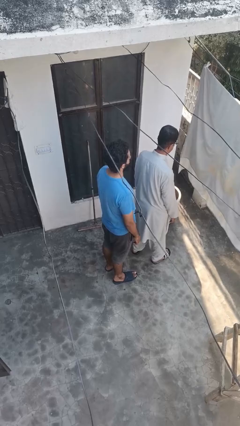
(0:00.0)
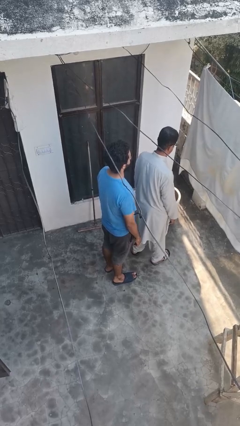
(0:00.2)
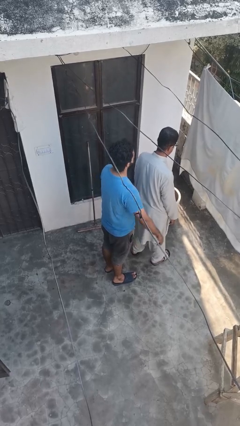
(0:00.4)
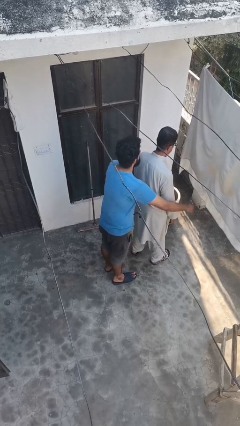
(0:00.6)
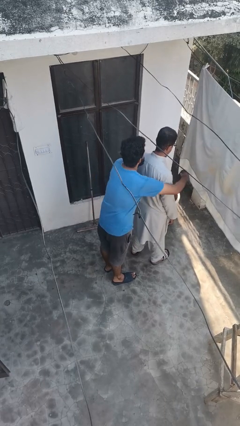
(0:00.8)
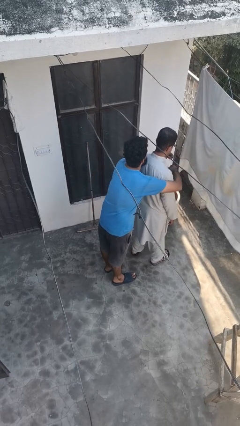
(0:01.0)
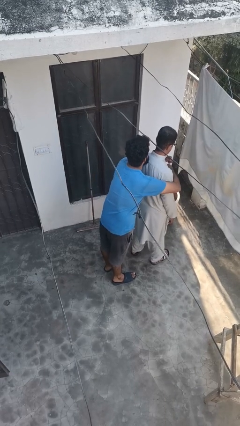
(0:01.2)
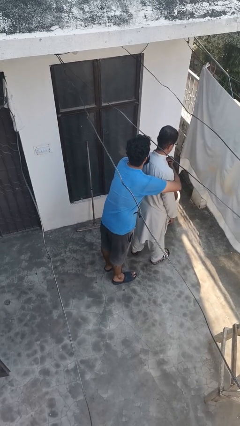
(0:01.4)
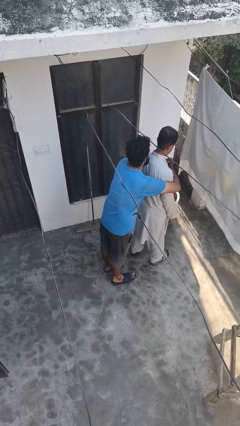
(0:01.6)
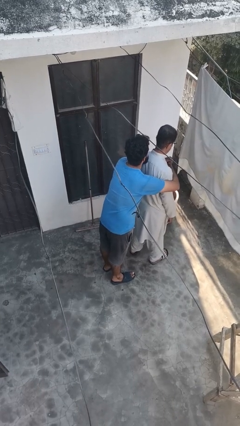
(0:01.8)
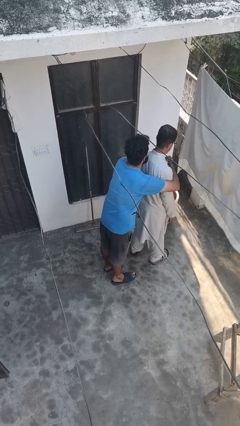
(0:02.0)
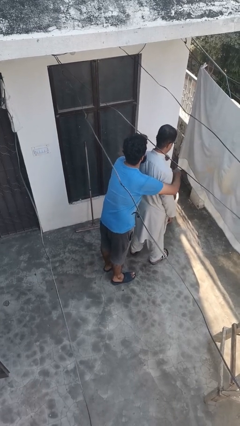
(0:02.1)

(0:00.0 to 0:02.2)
person hugs person from behind

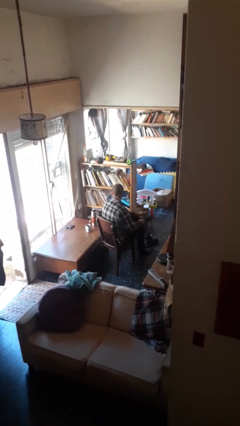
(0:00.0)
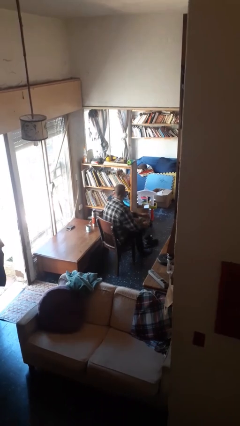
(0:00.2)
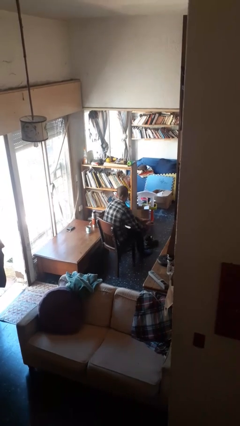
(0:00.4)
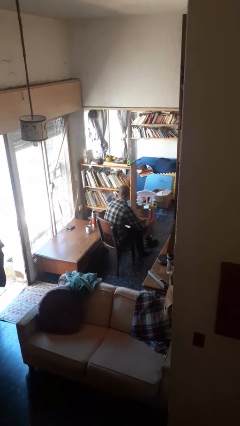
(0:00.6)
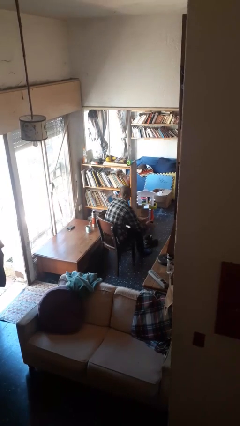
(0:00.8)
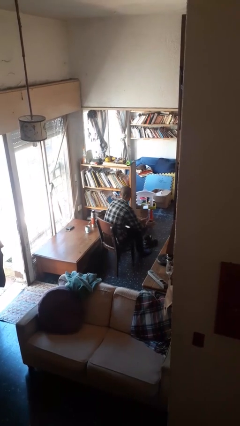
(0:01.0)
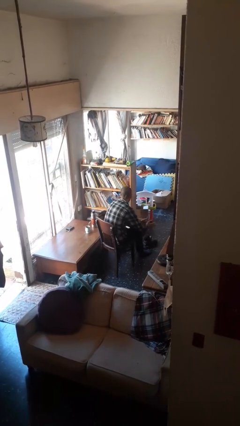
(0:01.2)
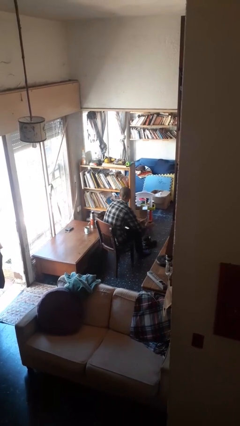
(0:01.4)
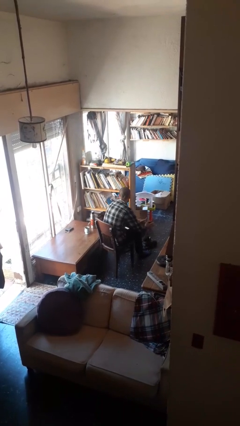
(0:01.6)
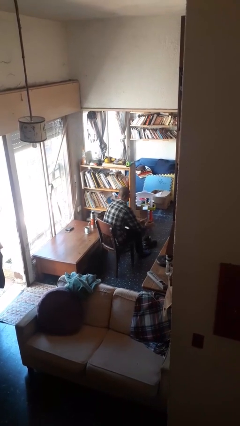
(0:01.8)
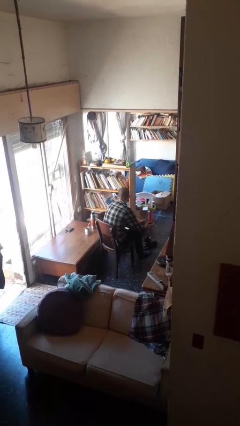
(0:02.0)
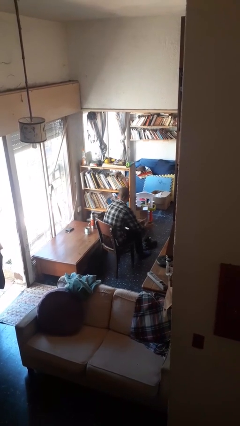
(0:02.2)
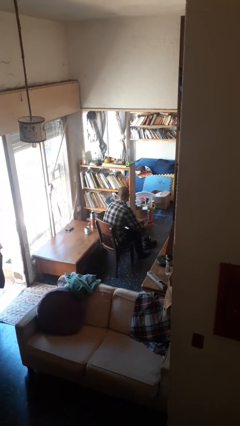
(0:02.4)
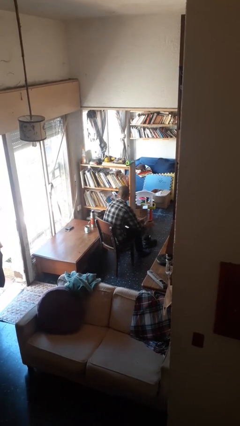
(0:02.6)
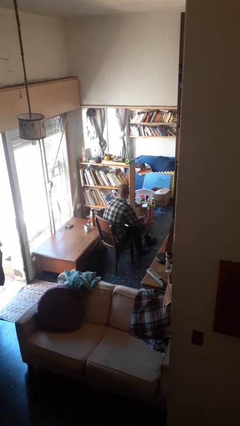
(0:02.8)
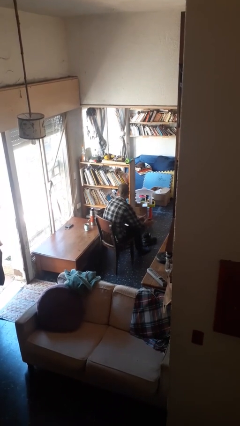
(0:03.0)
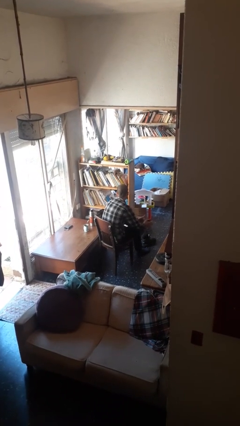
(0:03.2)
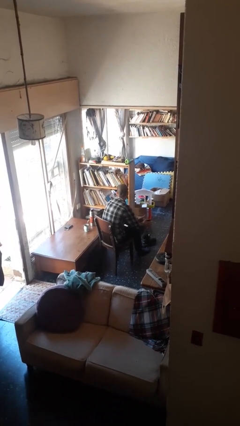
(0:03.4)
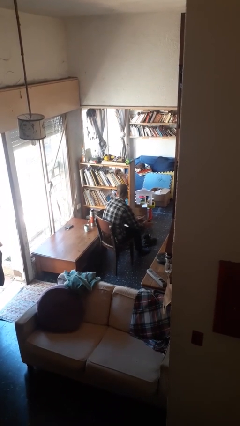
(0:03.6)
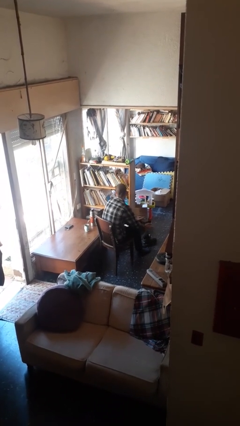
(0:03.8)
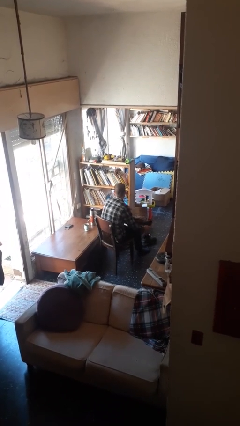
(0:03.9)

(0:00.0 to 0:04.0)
person rubs foot

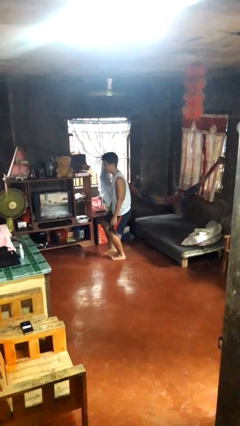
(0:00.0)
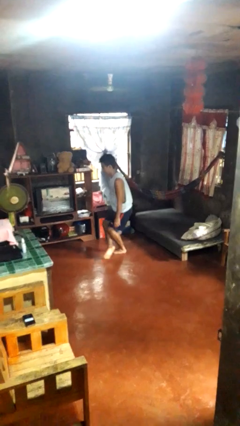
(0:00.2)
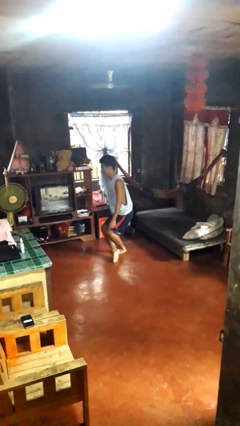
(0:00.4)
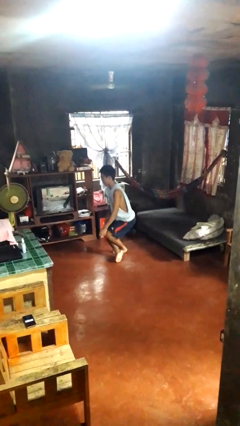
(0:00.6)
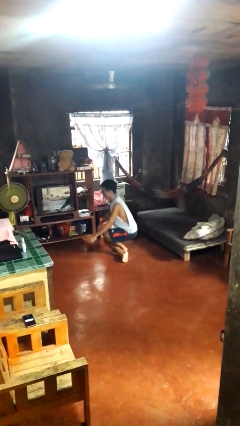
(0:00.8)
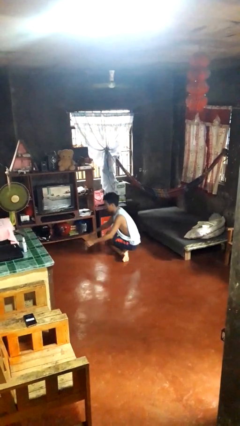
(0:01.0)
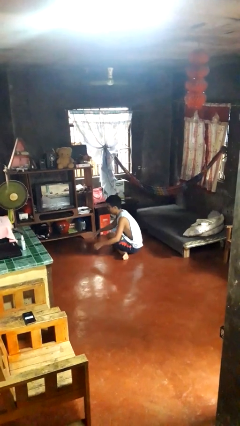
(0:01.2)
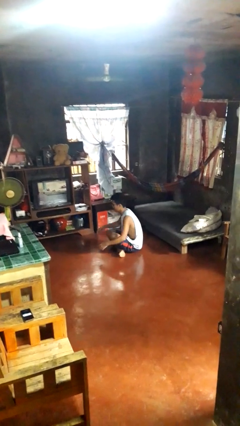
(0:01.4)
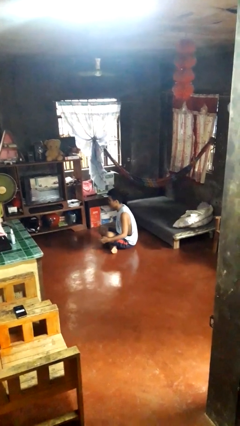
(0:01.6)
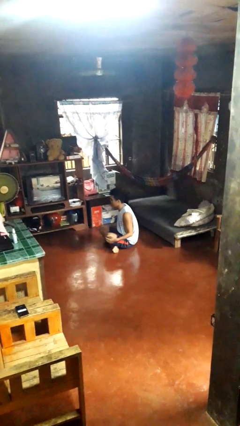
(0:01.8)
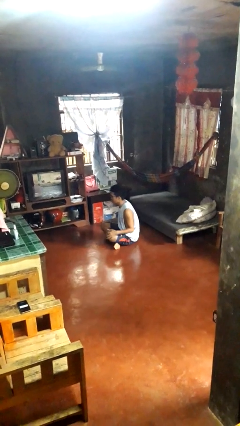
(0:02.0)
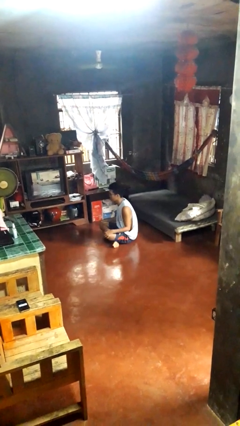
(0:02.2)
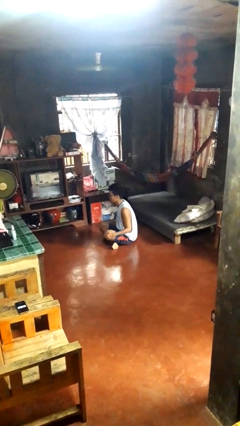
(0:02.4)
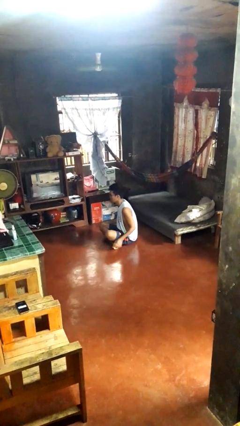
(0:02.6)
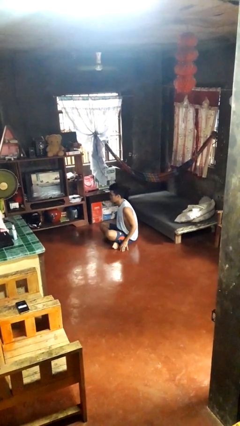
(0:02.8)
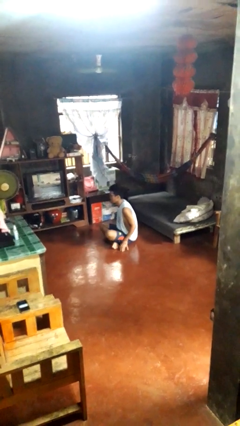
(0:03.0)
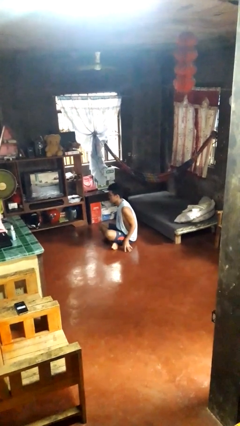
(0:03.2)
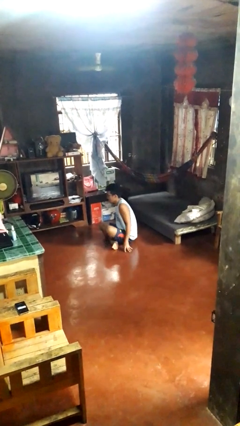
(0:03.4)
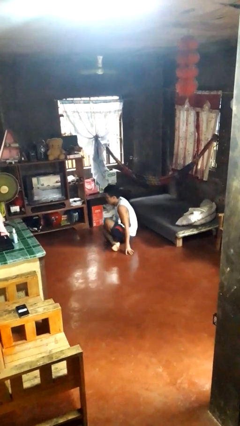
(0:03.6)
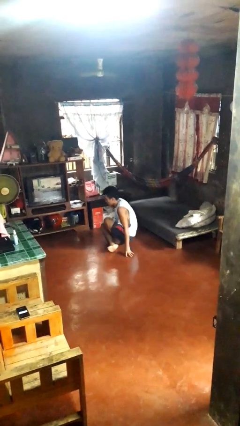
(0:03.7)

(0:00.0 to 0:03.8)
person sits crisscross

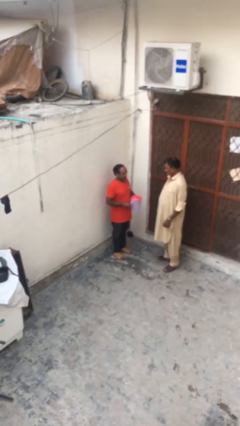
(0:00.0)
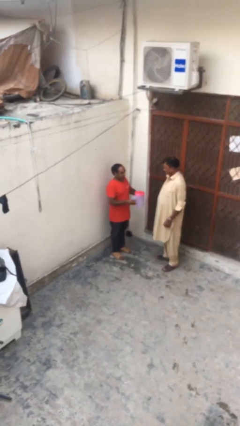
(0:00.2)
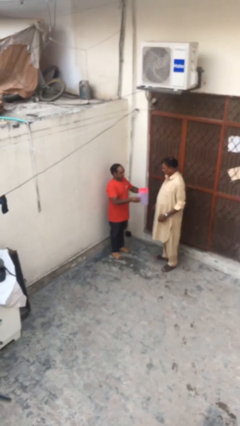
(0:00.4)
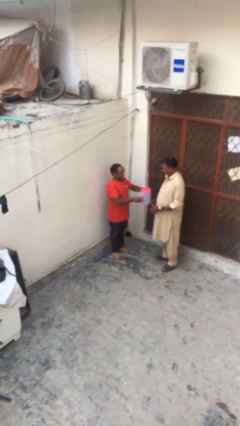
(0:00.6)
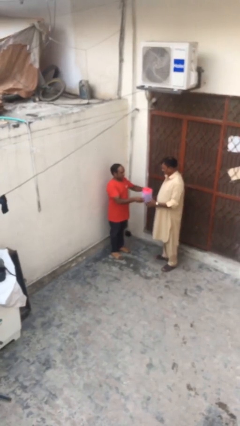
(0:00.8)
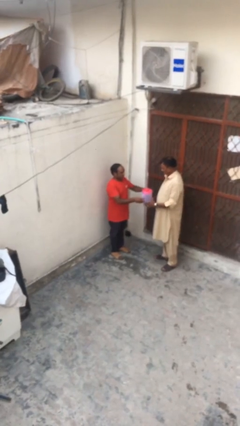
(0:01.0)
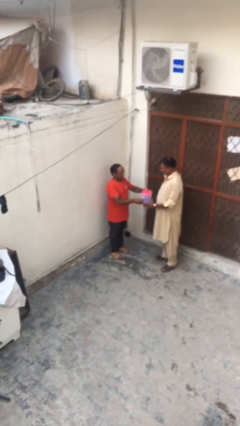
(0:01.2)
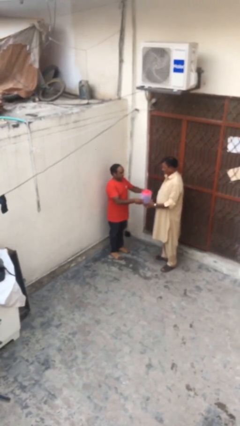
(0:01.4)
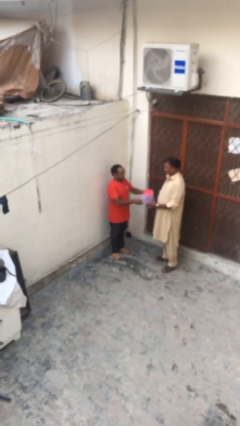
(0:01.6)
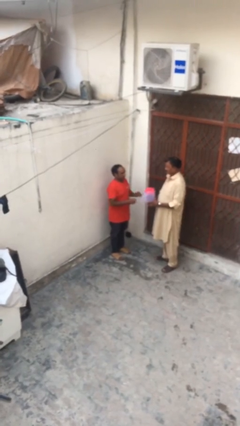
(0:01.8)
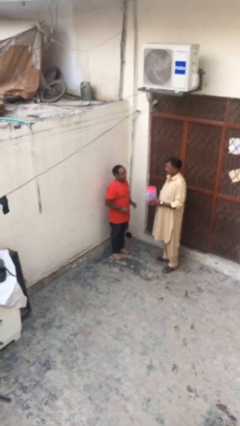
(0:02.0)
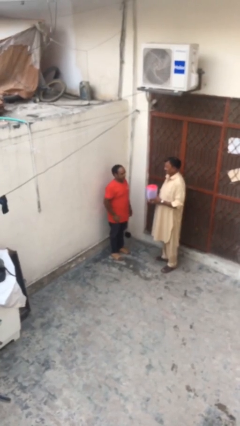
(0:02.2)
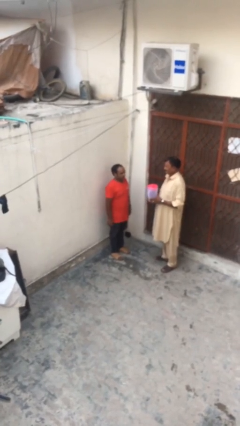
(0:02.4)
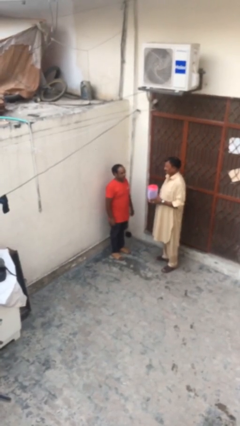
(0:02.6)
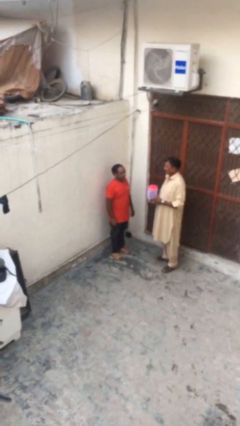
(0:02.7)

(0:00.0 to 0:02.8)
person transfers object to person

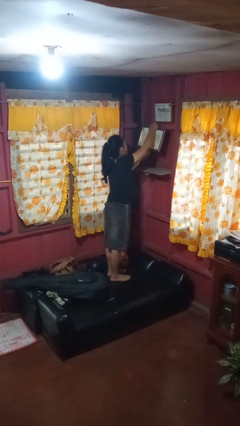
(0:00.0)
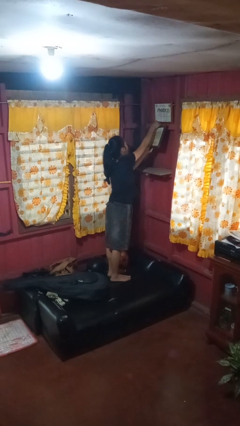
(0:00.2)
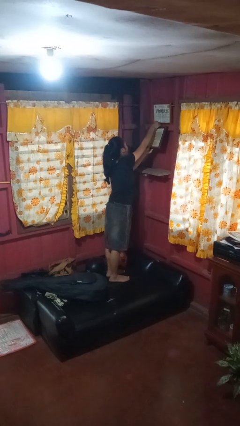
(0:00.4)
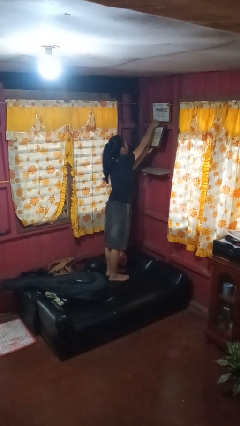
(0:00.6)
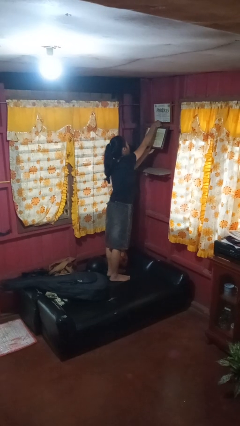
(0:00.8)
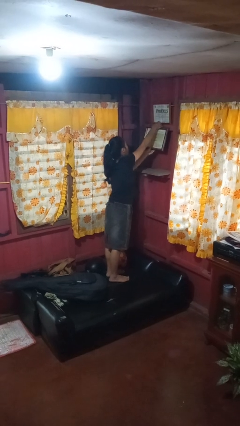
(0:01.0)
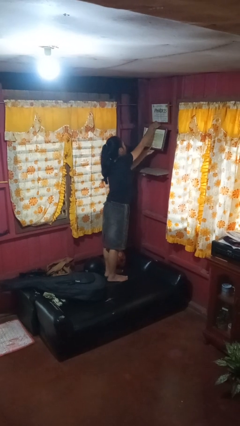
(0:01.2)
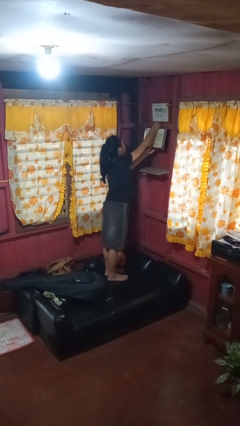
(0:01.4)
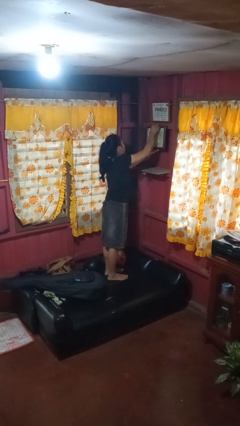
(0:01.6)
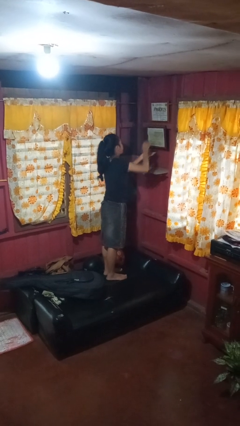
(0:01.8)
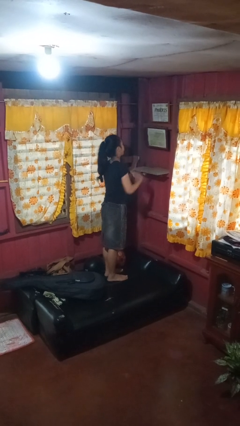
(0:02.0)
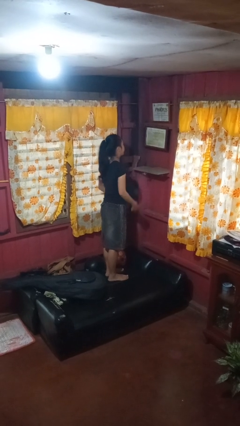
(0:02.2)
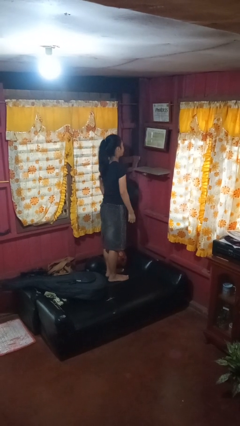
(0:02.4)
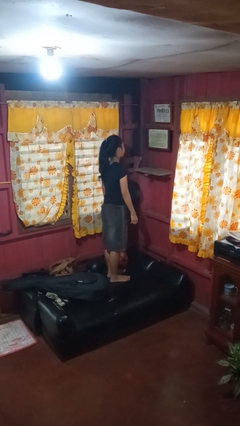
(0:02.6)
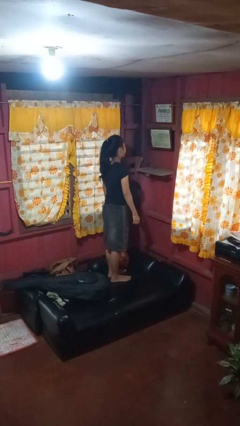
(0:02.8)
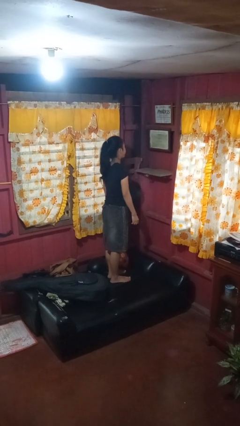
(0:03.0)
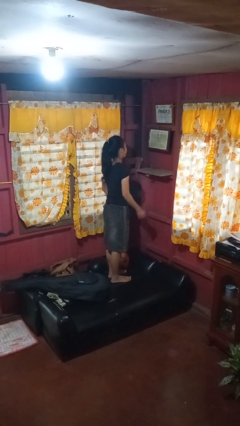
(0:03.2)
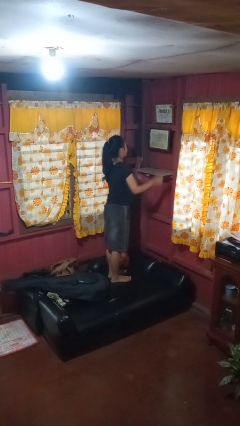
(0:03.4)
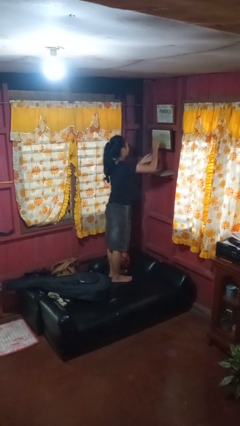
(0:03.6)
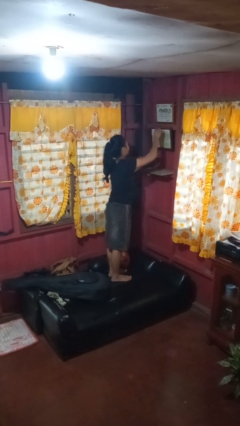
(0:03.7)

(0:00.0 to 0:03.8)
person puts up picture frame

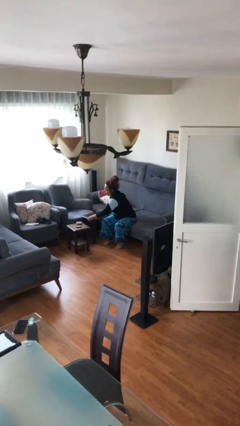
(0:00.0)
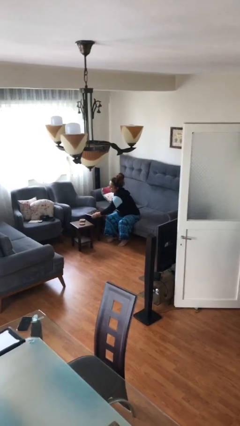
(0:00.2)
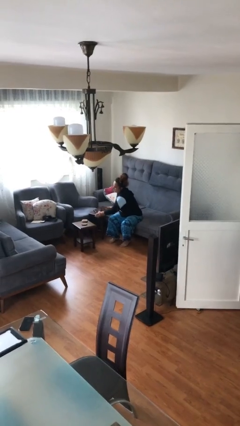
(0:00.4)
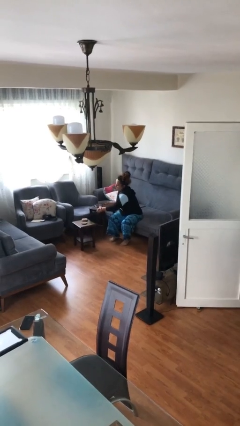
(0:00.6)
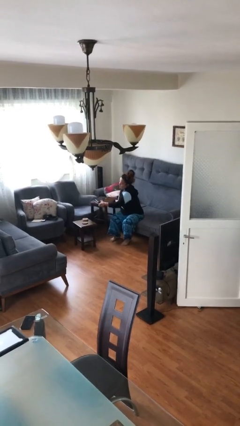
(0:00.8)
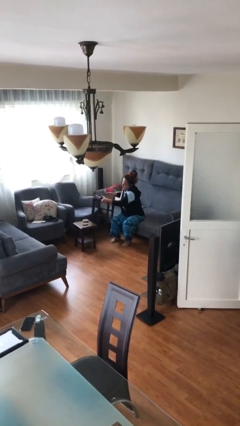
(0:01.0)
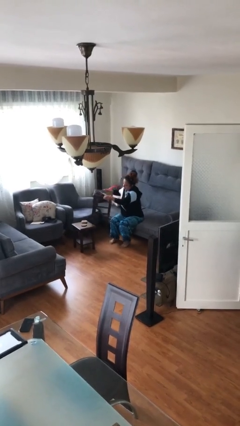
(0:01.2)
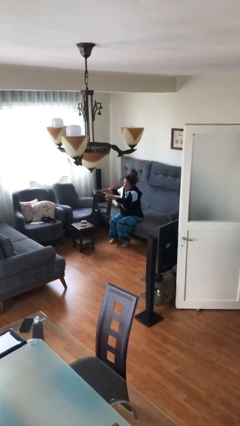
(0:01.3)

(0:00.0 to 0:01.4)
person picks up object from floor
